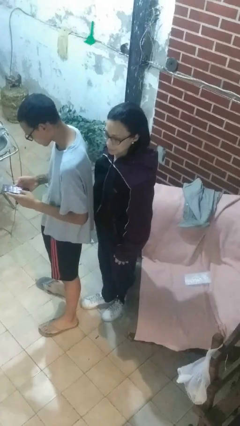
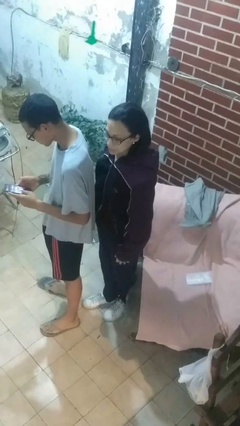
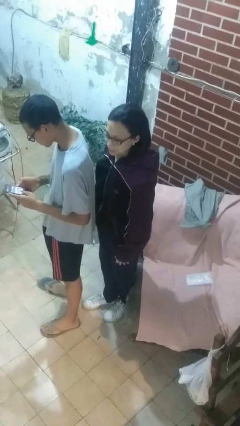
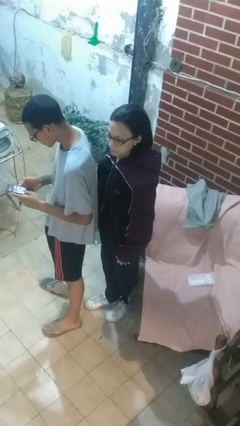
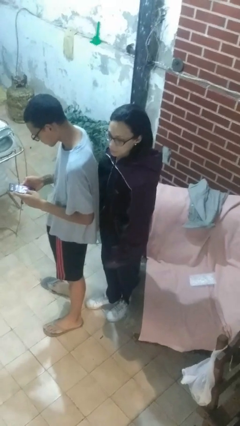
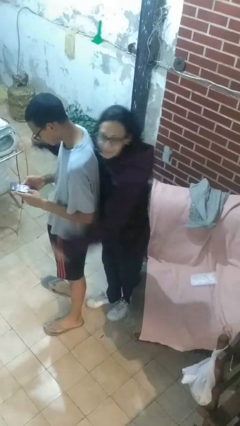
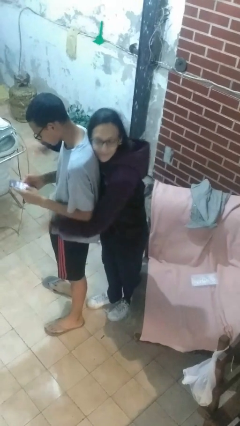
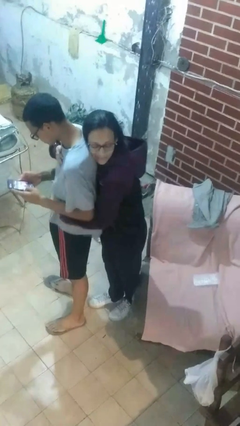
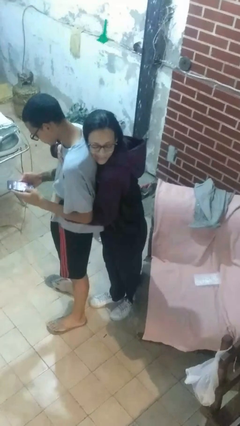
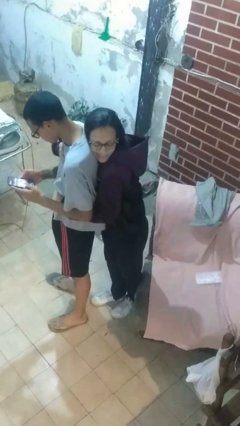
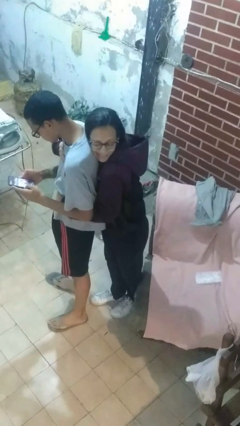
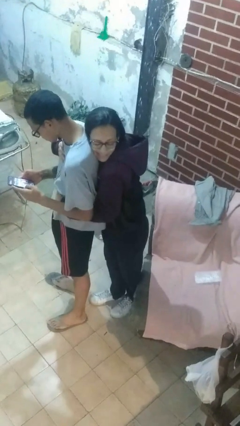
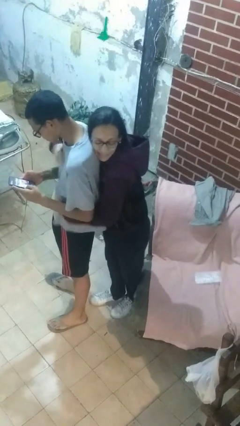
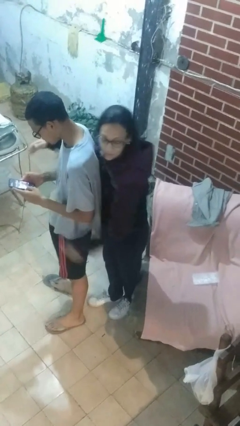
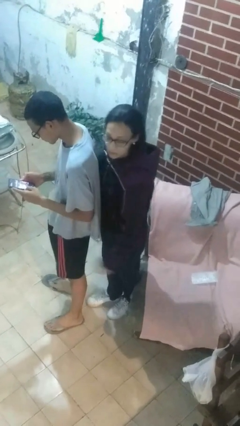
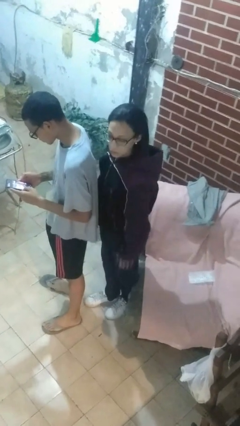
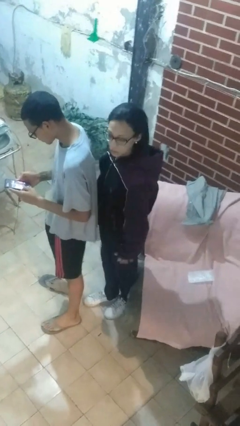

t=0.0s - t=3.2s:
person hugs person from behind

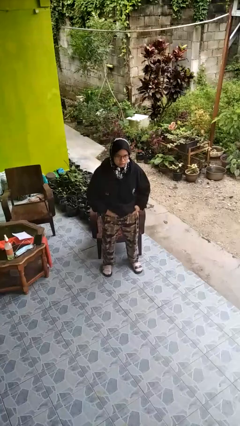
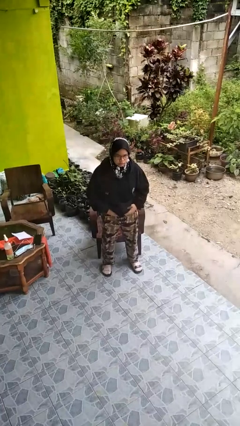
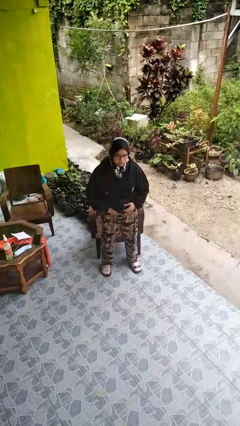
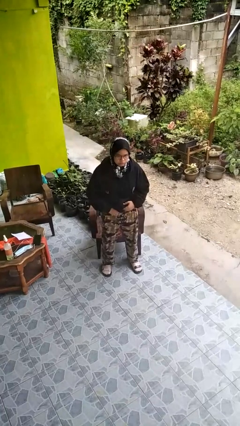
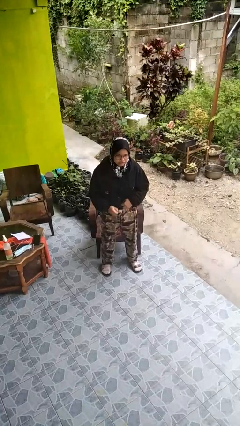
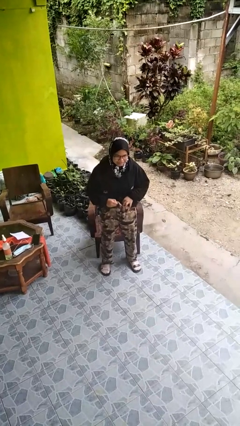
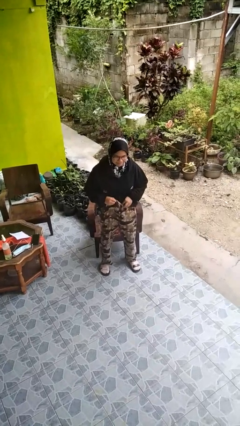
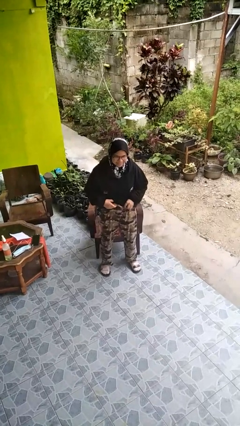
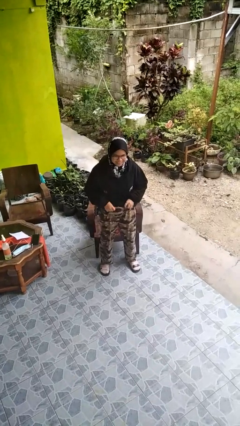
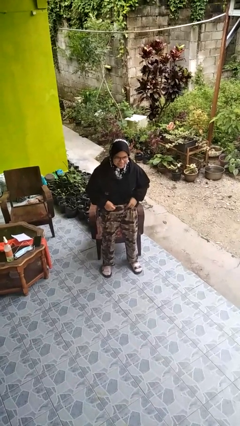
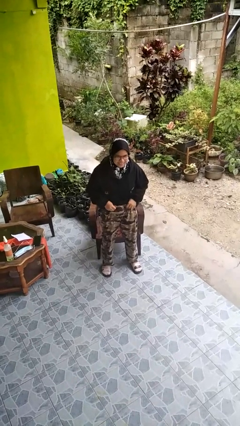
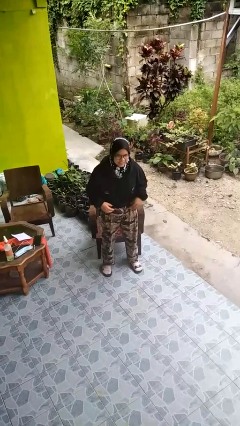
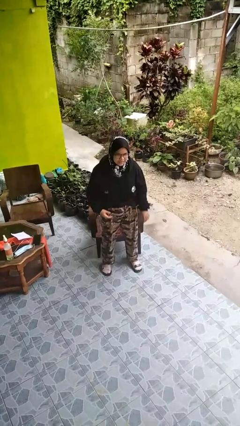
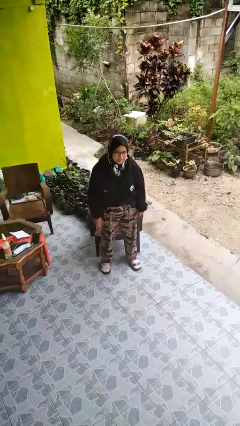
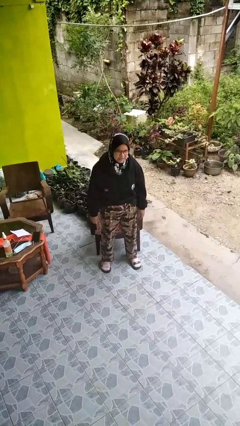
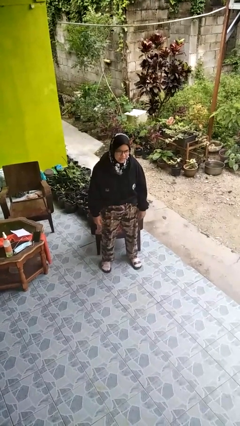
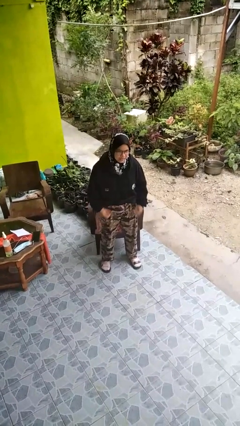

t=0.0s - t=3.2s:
person tucks in shirt

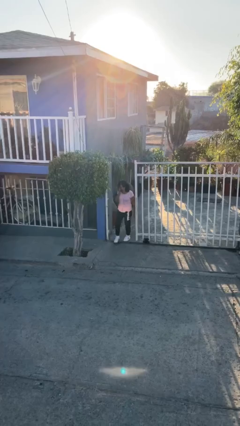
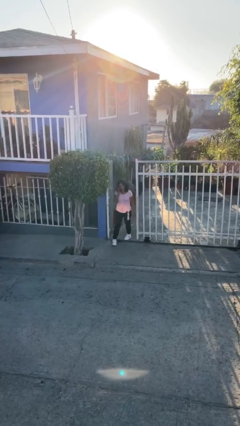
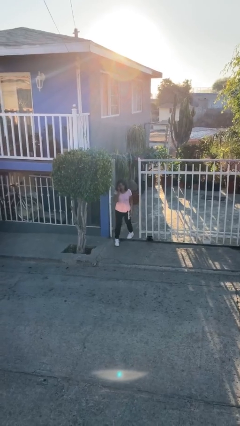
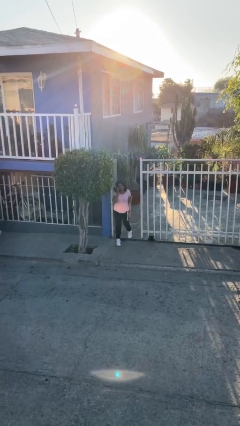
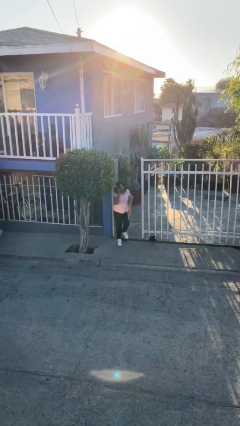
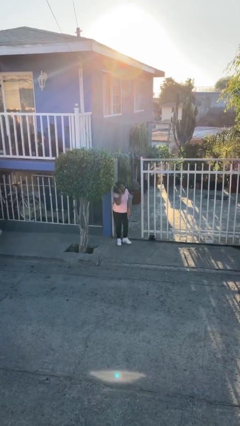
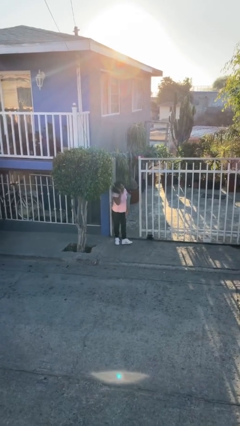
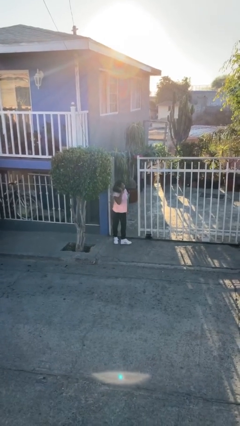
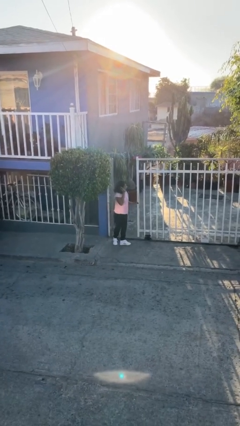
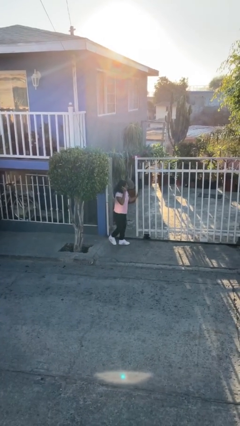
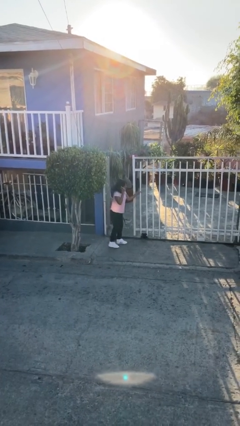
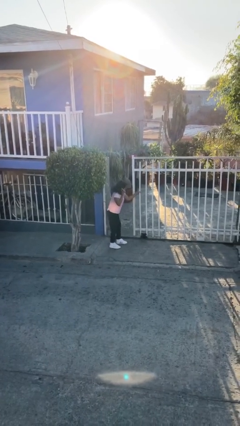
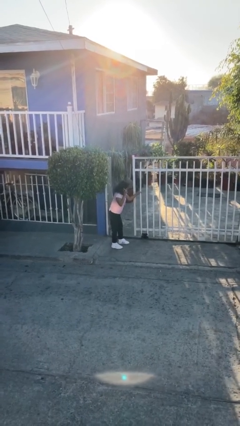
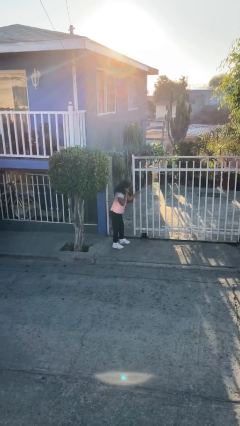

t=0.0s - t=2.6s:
person enters scene through structure

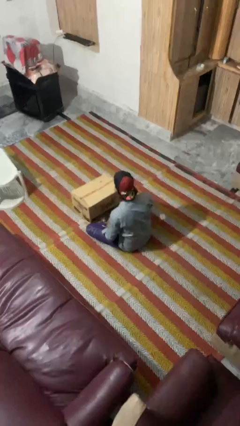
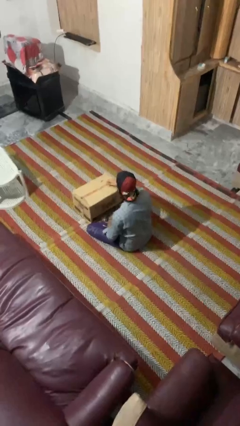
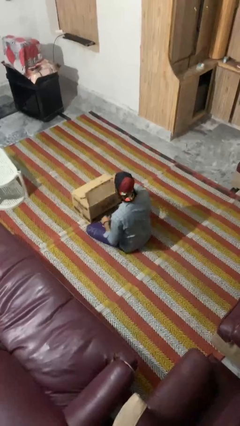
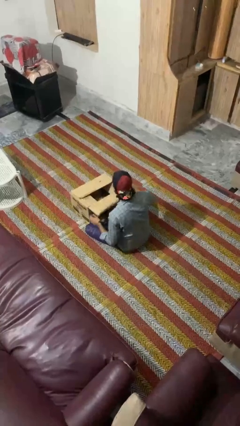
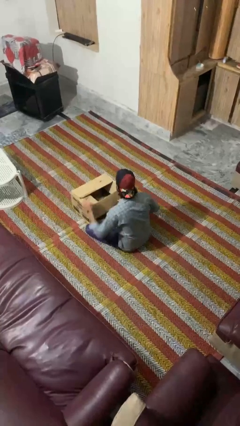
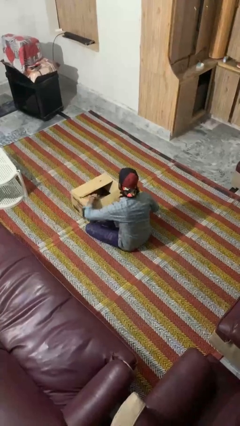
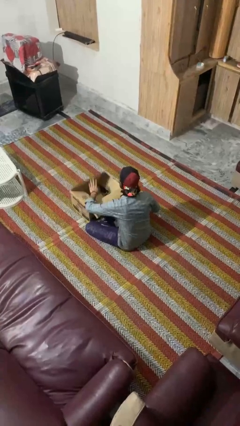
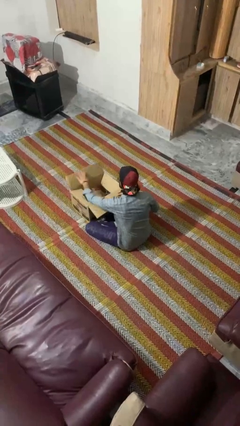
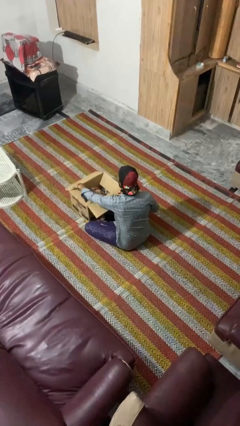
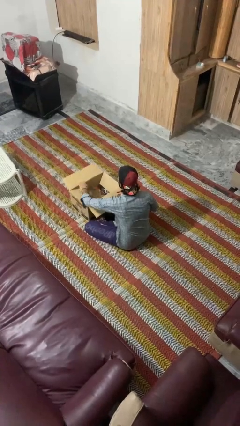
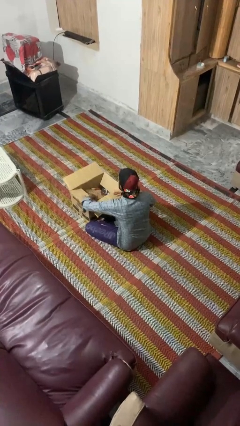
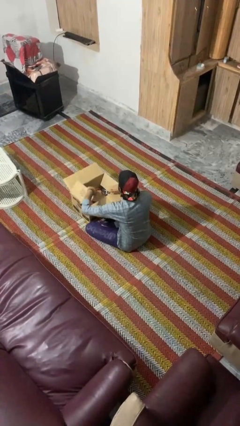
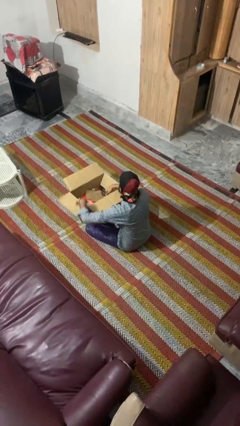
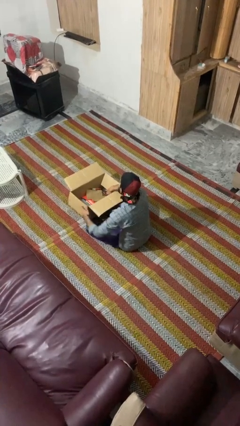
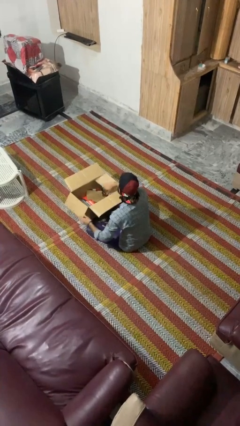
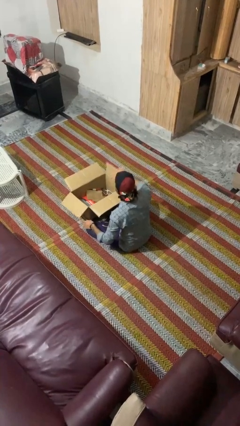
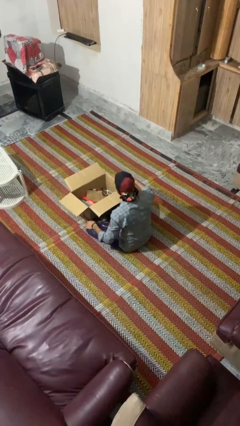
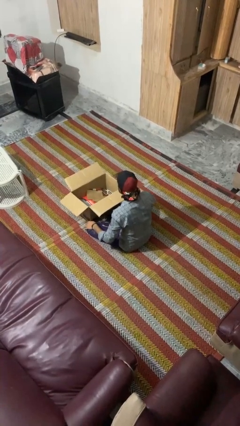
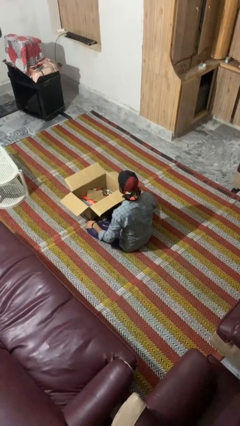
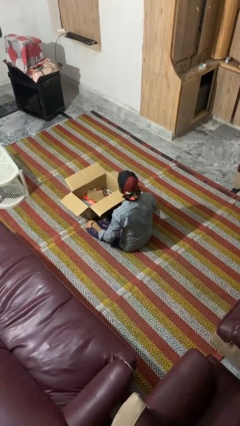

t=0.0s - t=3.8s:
person opens box

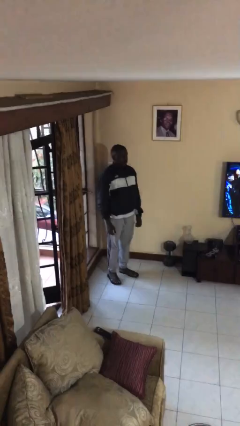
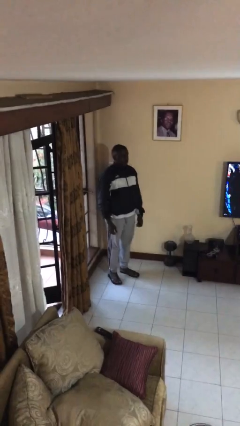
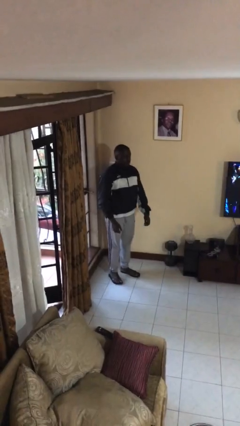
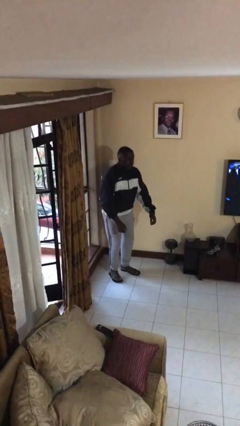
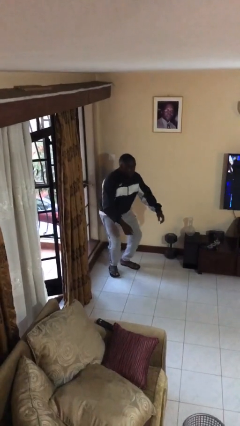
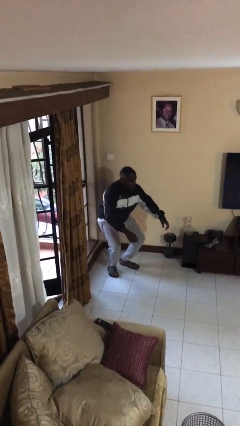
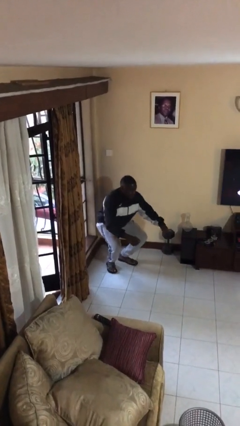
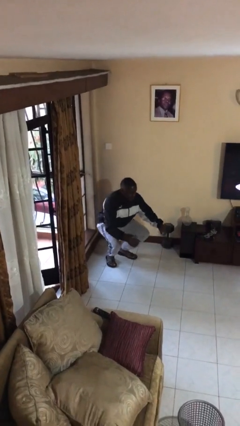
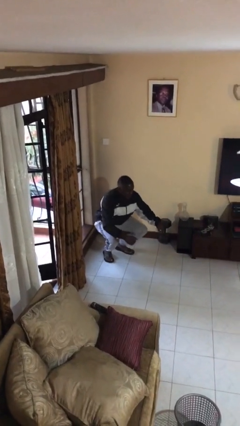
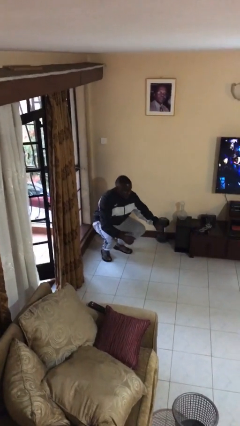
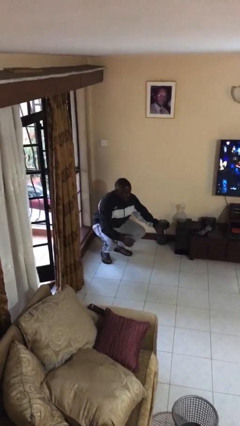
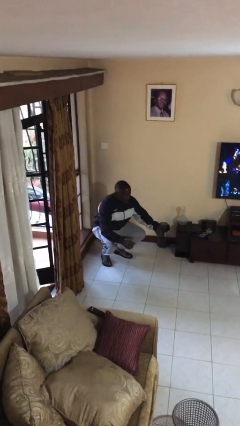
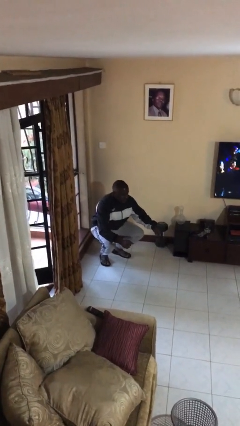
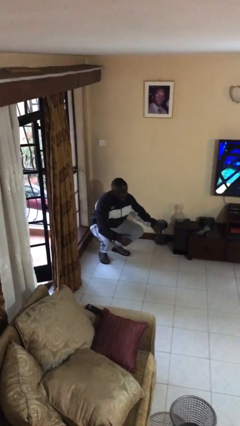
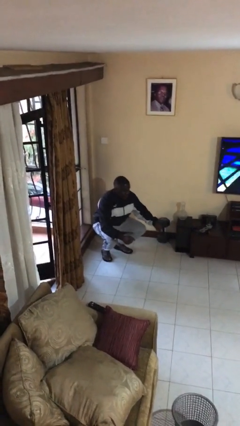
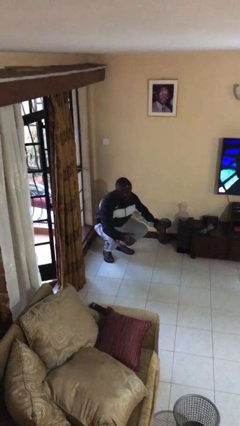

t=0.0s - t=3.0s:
person squats

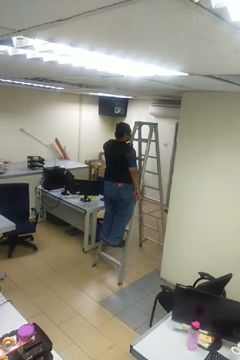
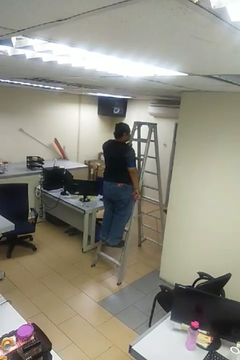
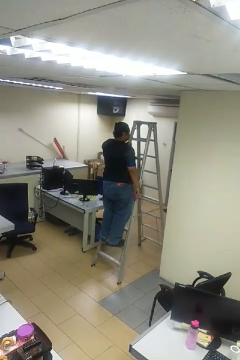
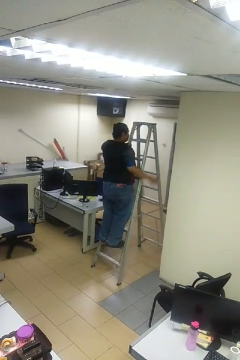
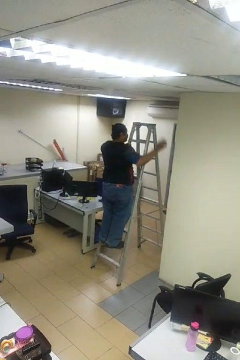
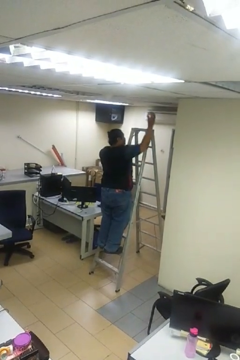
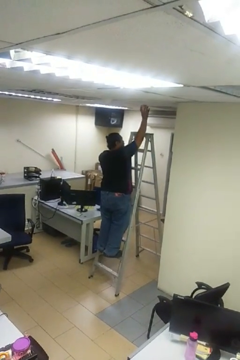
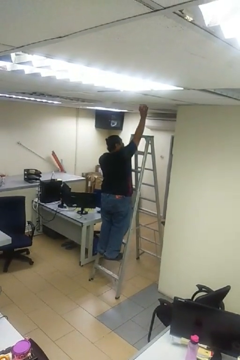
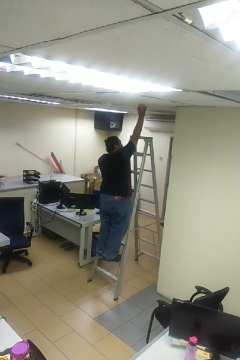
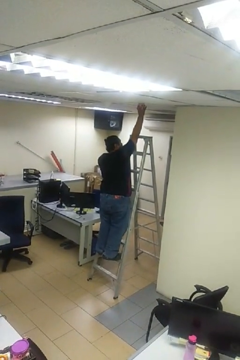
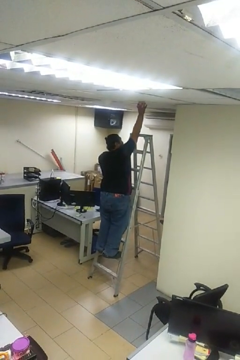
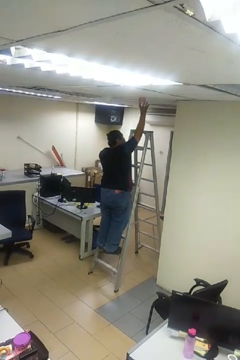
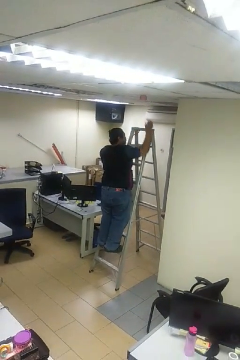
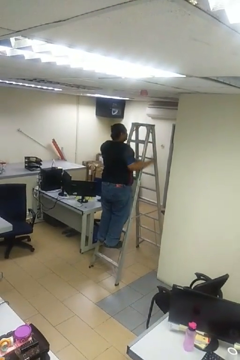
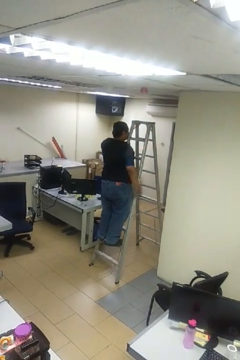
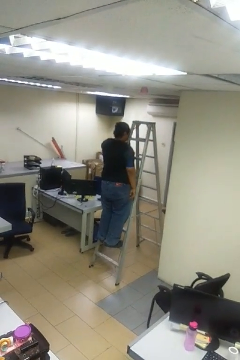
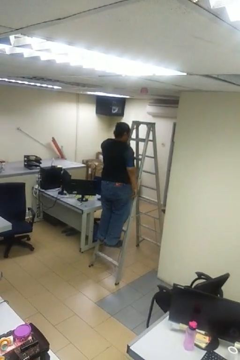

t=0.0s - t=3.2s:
person puts up smoke detector
